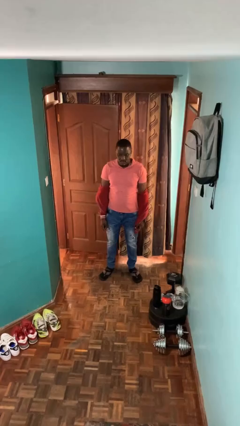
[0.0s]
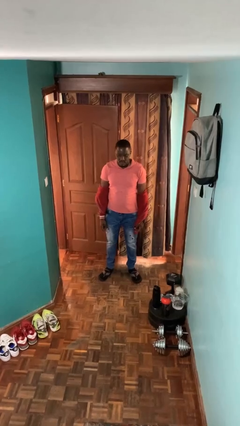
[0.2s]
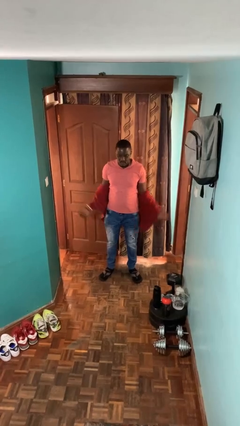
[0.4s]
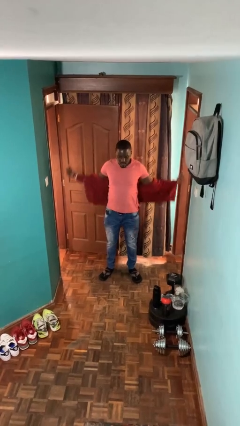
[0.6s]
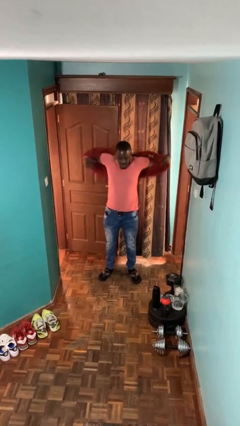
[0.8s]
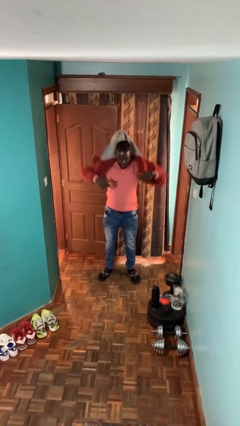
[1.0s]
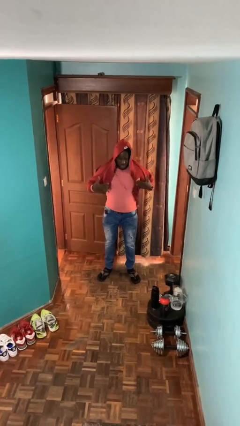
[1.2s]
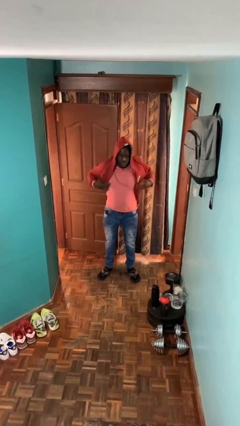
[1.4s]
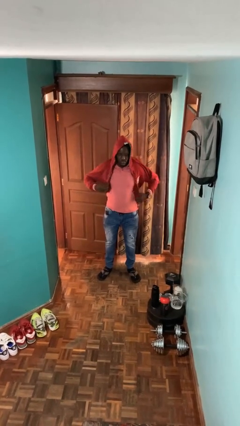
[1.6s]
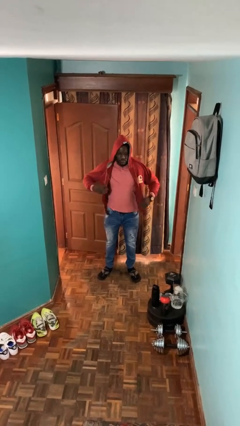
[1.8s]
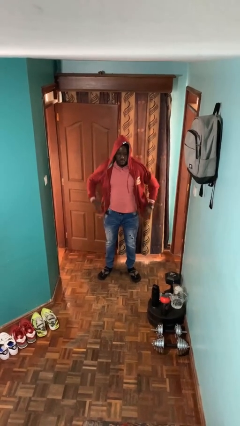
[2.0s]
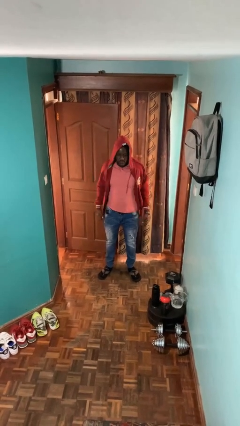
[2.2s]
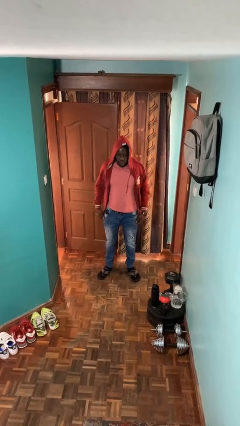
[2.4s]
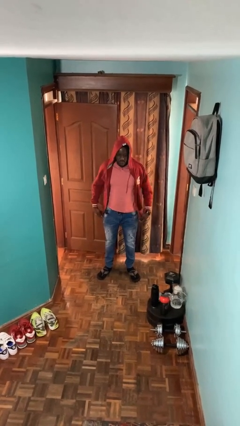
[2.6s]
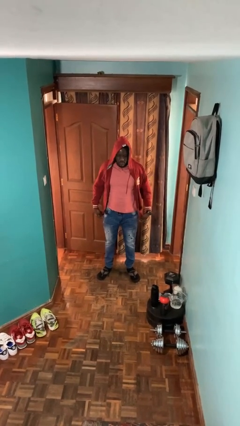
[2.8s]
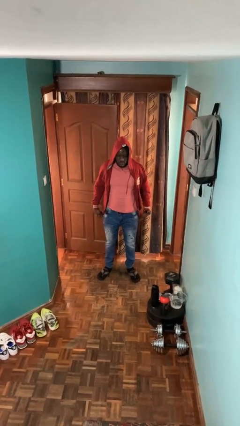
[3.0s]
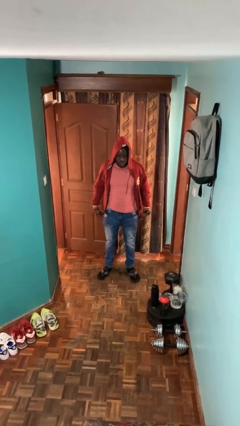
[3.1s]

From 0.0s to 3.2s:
person puts on jacket

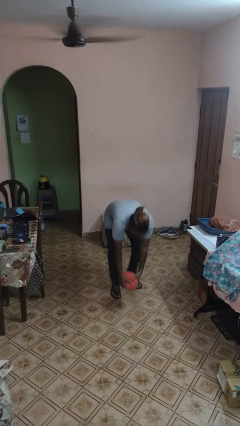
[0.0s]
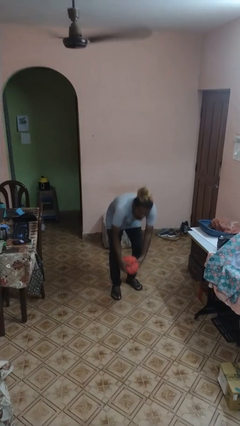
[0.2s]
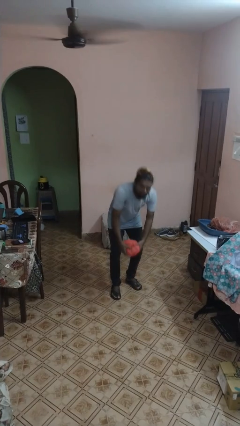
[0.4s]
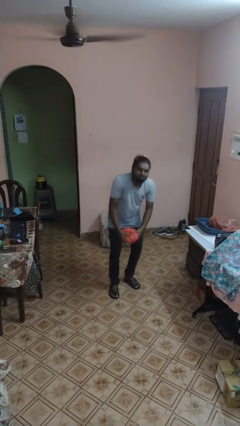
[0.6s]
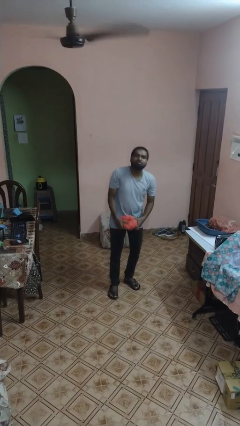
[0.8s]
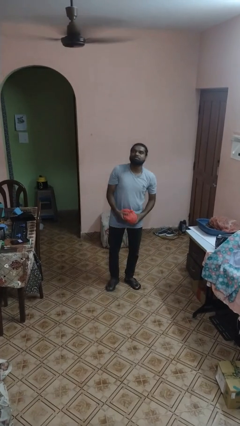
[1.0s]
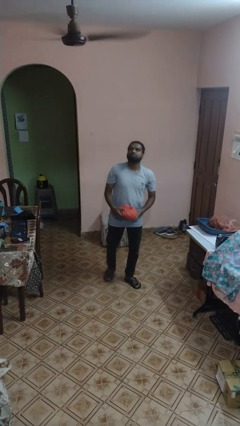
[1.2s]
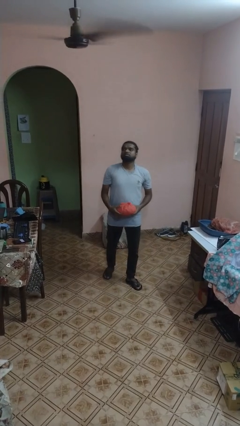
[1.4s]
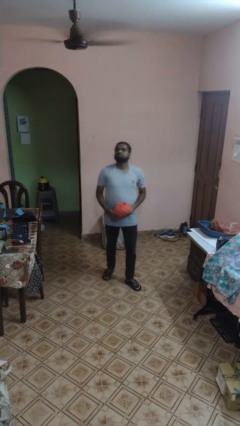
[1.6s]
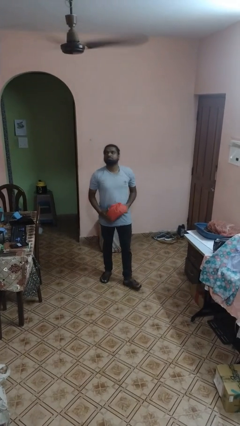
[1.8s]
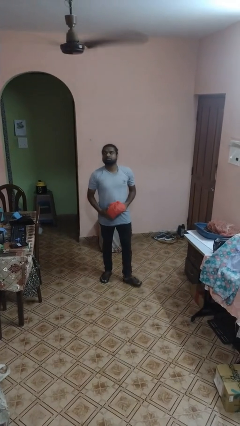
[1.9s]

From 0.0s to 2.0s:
person picks up object from floor

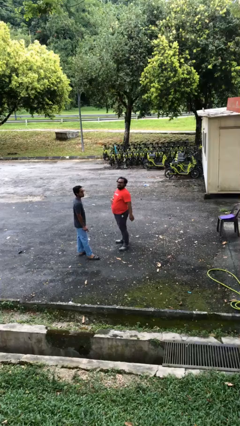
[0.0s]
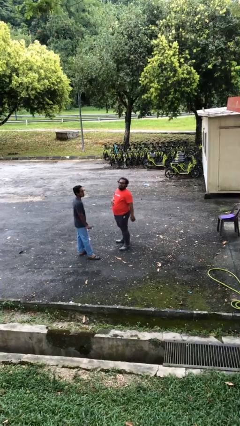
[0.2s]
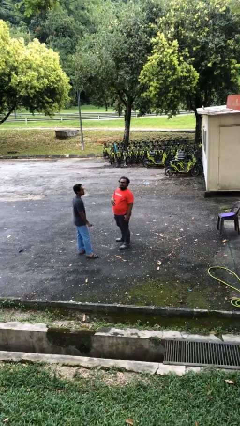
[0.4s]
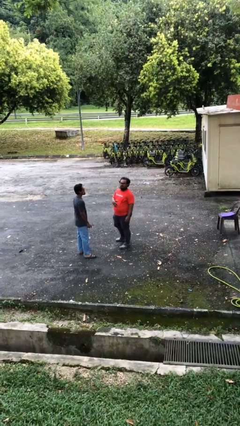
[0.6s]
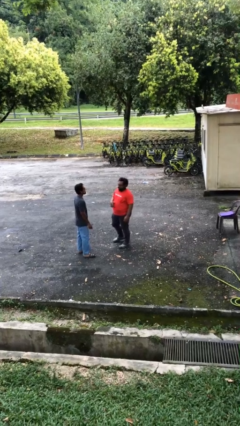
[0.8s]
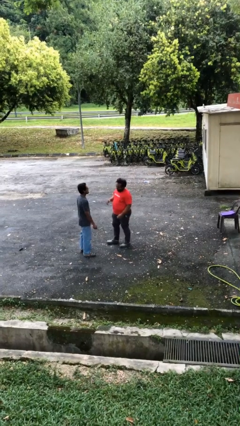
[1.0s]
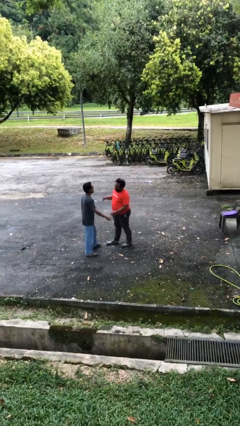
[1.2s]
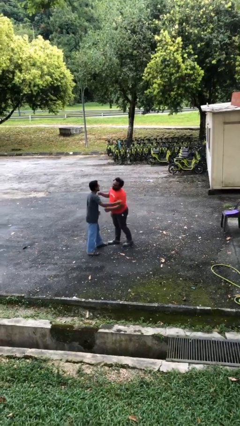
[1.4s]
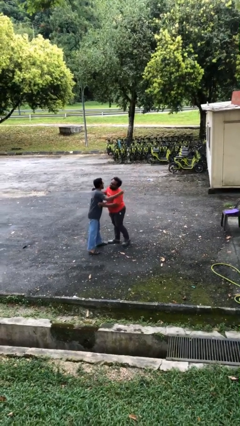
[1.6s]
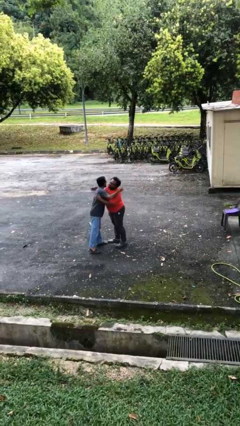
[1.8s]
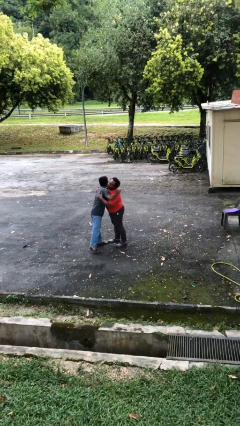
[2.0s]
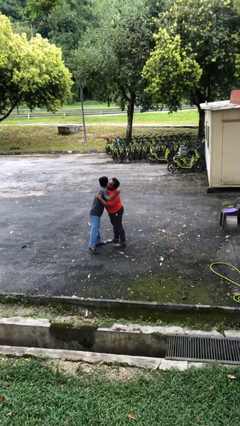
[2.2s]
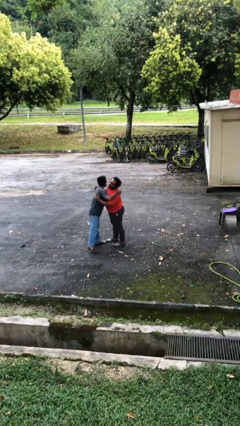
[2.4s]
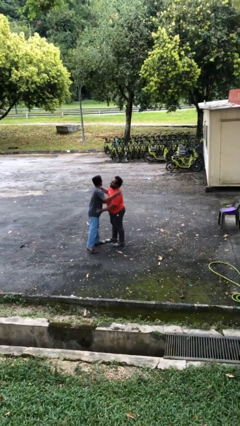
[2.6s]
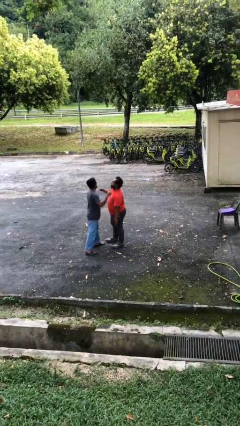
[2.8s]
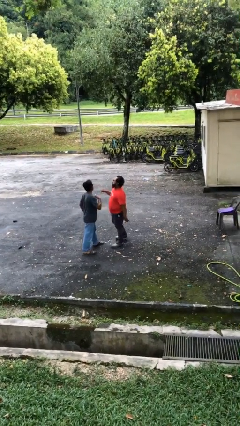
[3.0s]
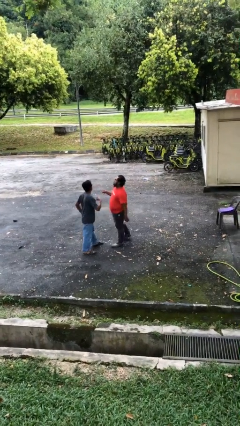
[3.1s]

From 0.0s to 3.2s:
person embraces person

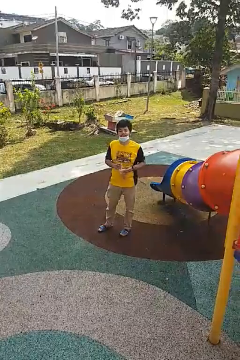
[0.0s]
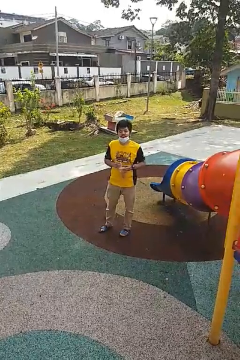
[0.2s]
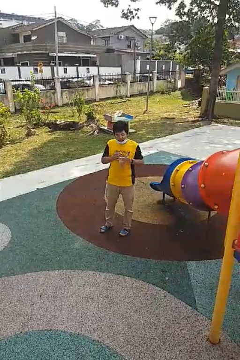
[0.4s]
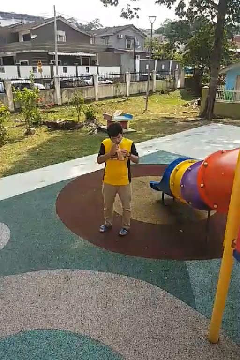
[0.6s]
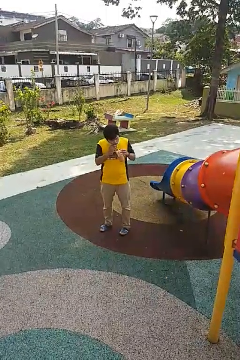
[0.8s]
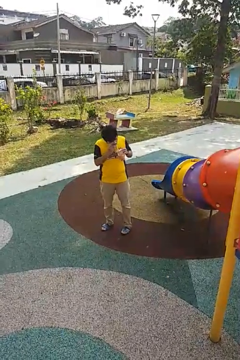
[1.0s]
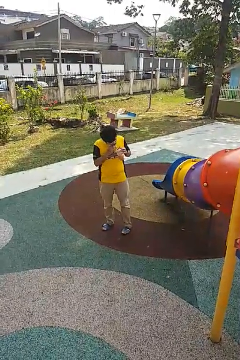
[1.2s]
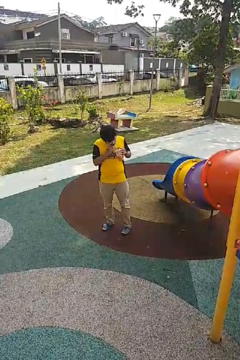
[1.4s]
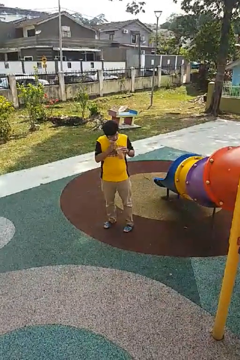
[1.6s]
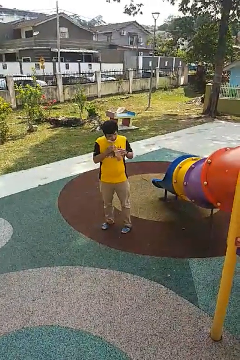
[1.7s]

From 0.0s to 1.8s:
person drinks from straw

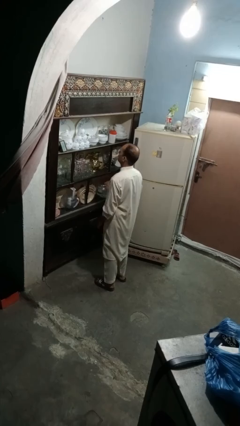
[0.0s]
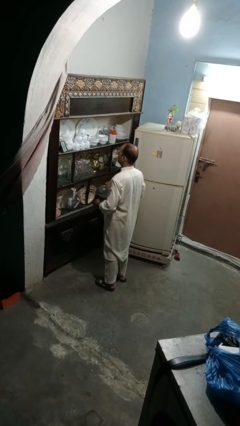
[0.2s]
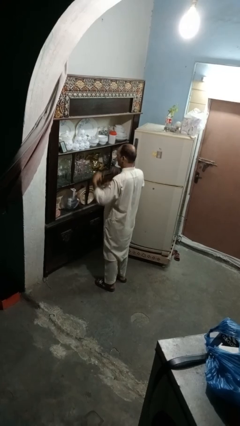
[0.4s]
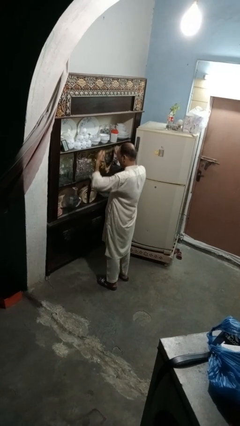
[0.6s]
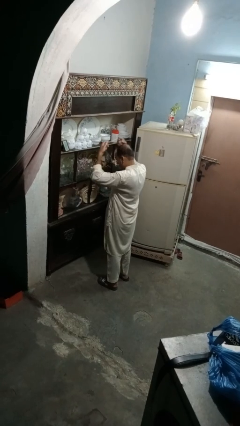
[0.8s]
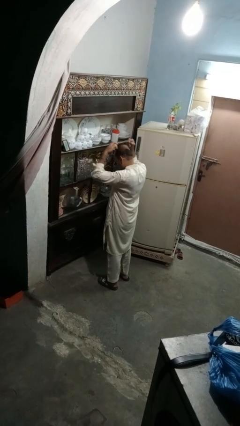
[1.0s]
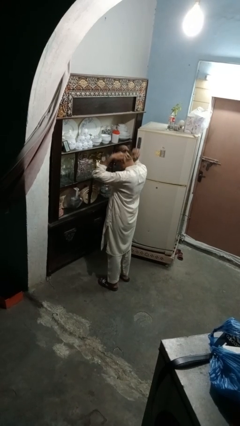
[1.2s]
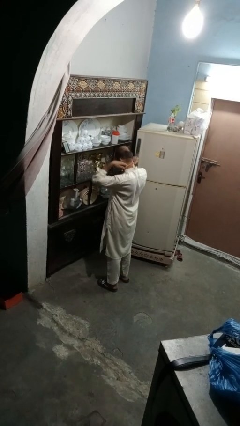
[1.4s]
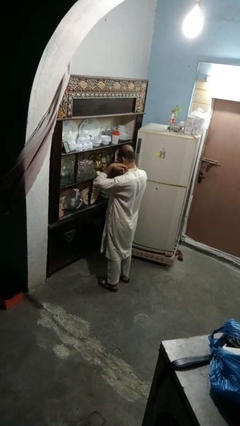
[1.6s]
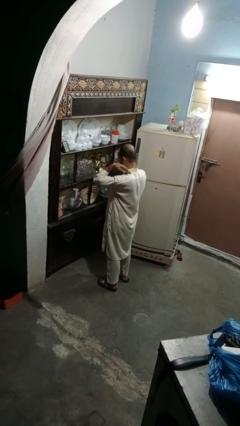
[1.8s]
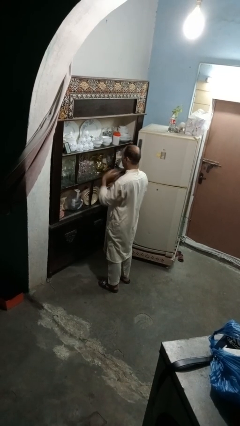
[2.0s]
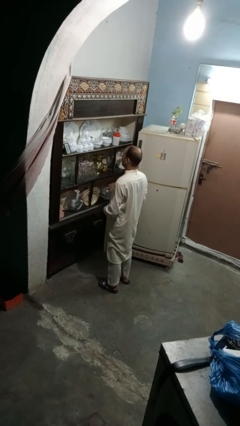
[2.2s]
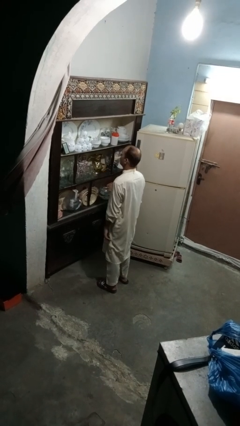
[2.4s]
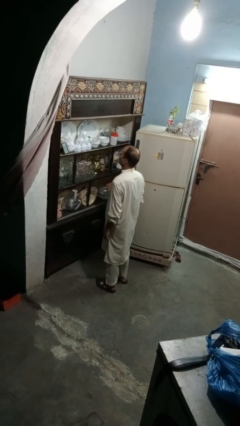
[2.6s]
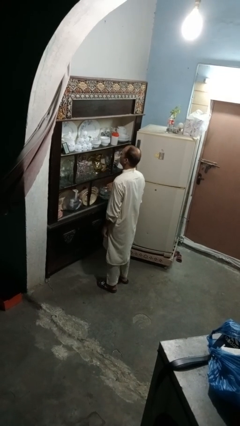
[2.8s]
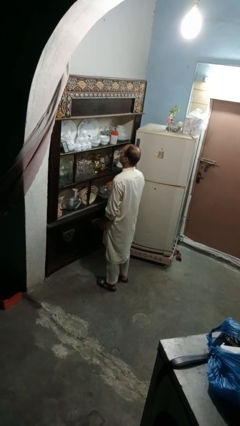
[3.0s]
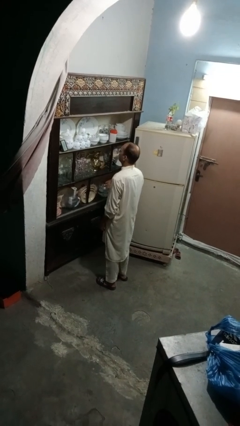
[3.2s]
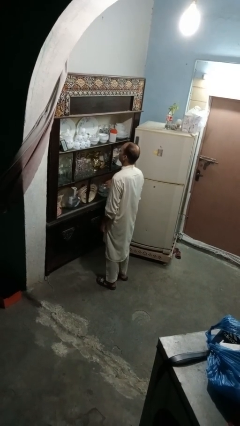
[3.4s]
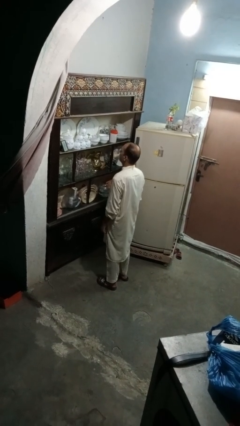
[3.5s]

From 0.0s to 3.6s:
person puts on necklace

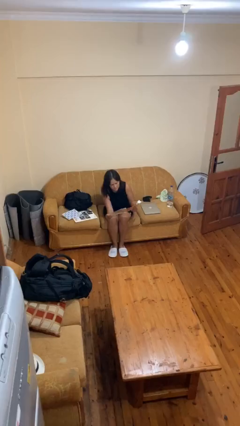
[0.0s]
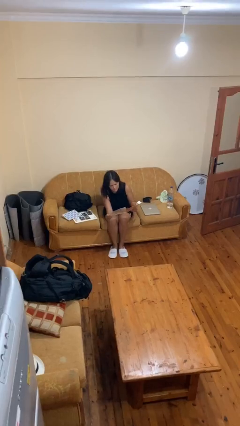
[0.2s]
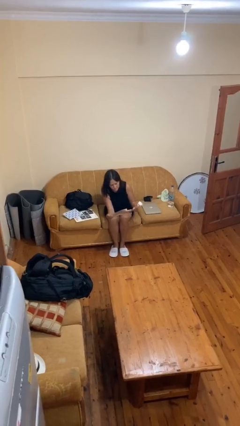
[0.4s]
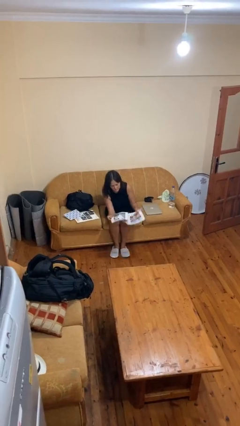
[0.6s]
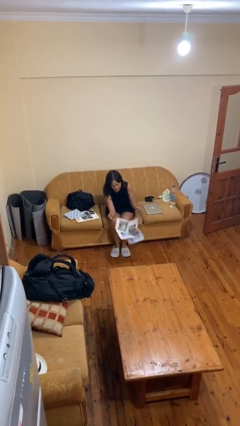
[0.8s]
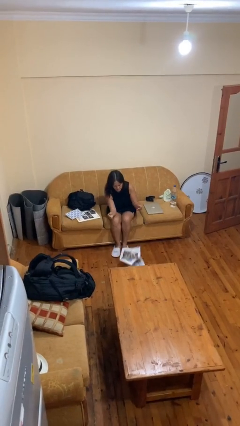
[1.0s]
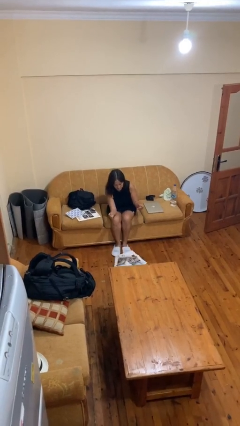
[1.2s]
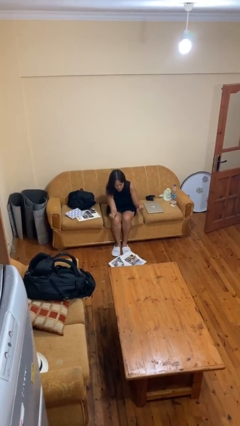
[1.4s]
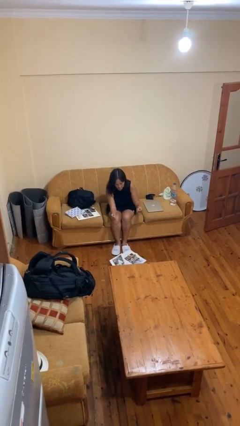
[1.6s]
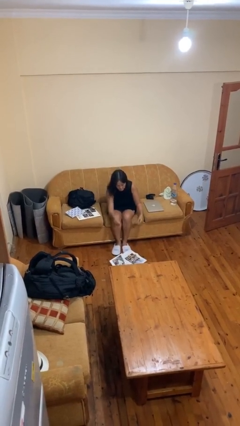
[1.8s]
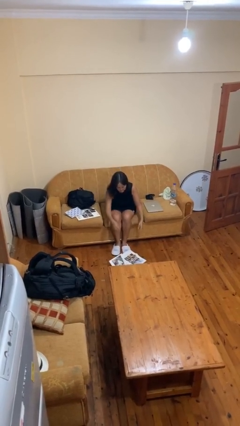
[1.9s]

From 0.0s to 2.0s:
person drops object

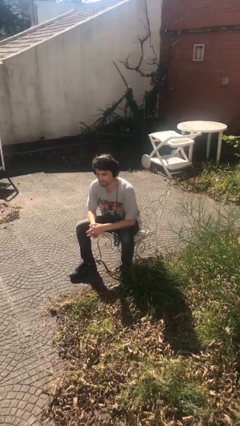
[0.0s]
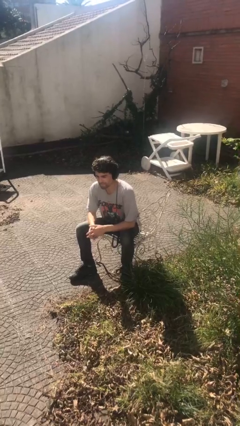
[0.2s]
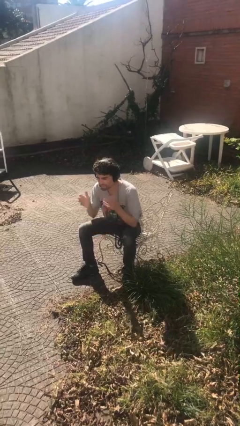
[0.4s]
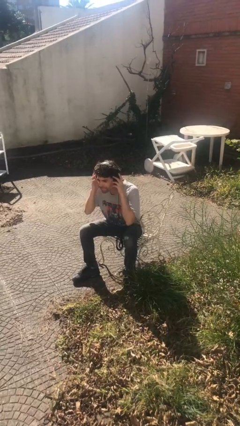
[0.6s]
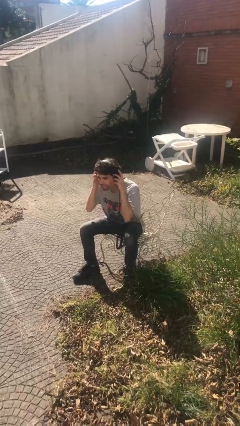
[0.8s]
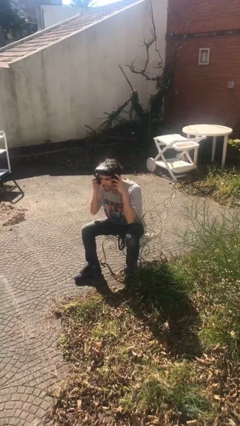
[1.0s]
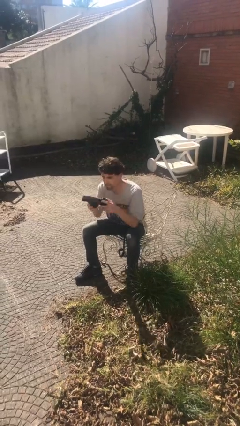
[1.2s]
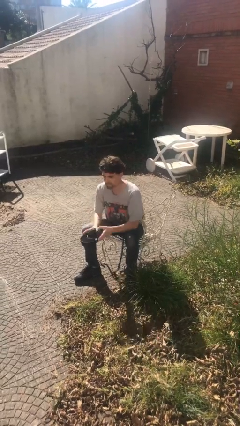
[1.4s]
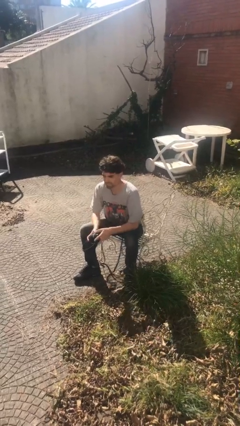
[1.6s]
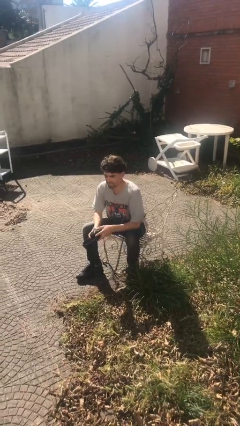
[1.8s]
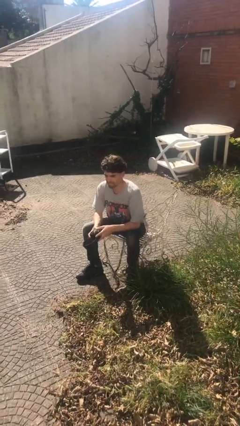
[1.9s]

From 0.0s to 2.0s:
person takes off headphones
